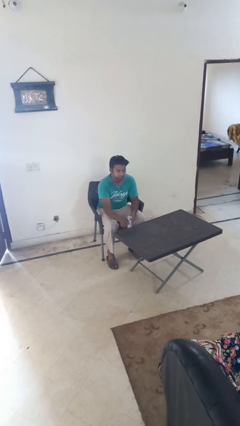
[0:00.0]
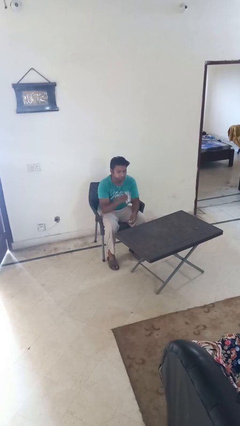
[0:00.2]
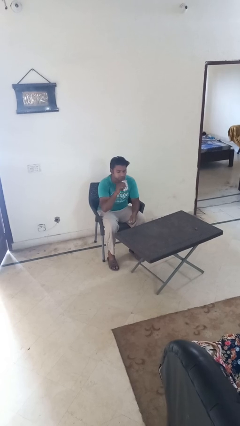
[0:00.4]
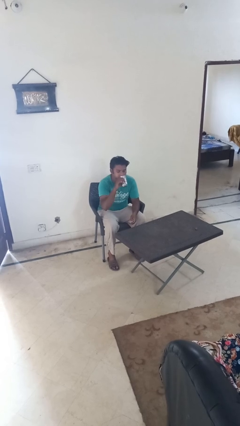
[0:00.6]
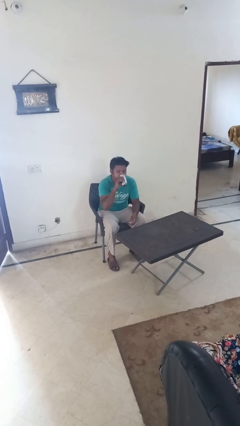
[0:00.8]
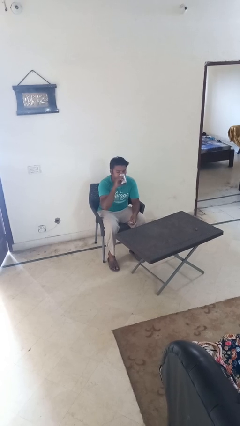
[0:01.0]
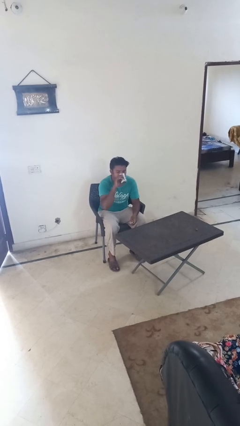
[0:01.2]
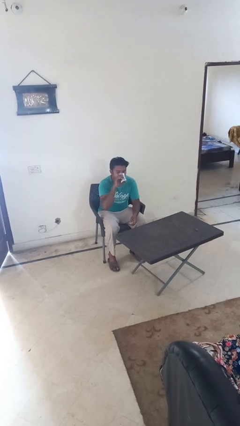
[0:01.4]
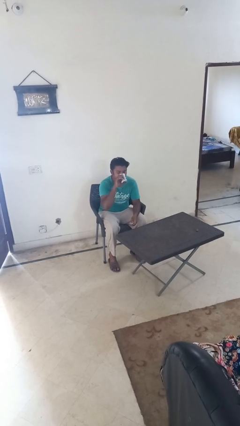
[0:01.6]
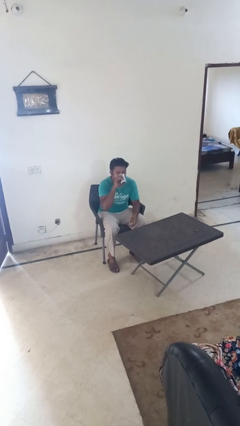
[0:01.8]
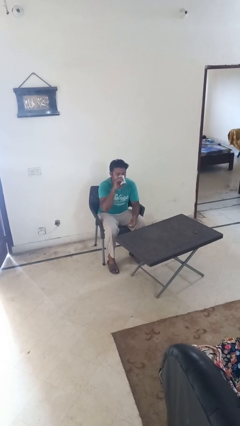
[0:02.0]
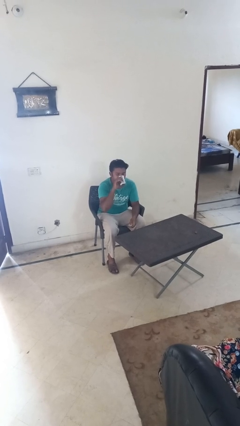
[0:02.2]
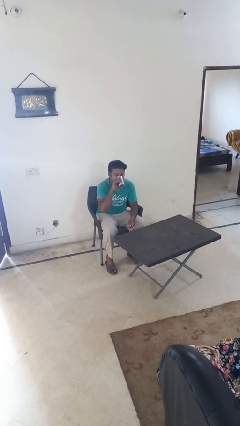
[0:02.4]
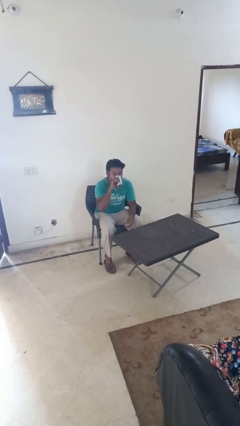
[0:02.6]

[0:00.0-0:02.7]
person drinks from cup

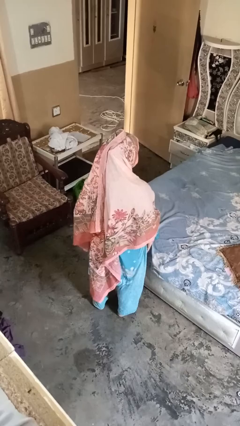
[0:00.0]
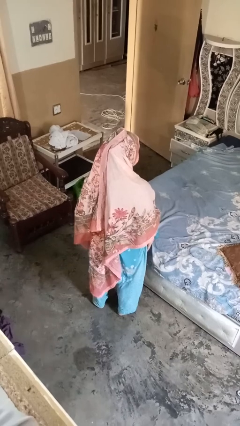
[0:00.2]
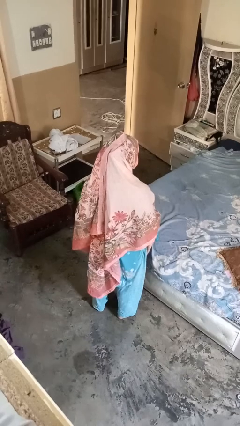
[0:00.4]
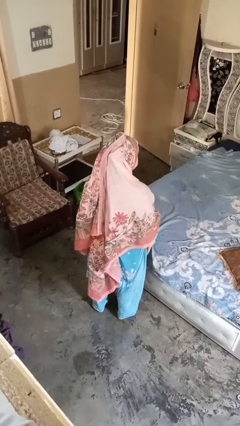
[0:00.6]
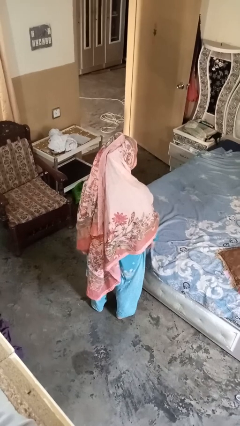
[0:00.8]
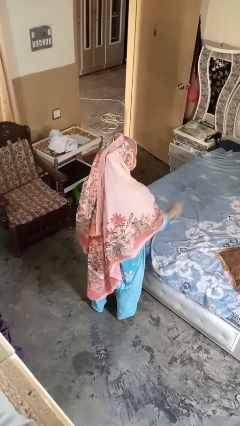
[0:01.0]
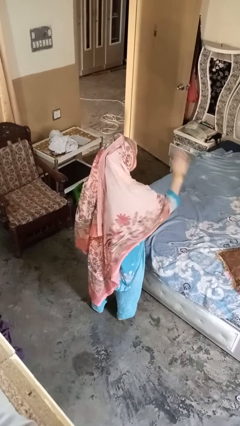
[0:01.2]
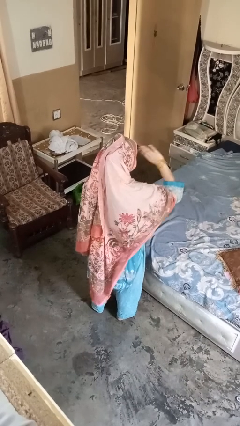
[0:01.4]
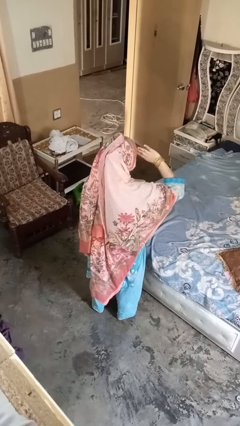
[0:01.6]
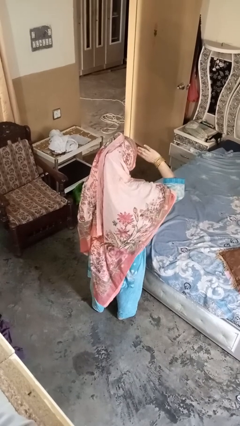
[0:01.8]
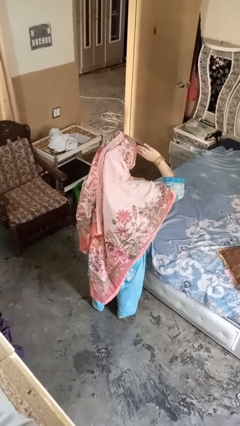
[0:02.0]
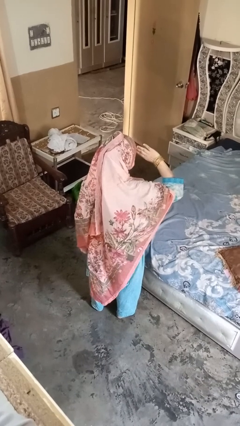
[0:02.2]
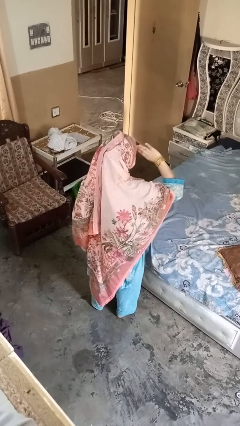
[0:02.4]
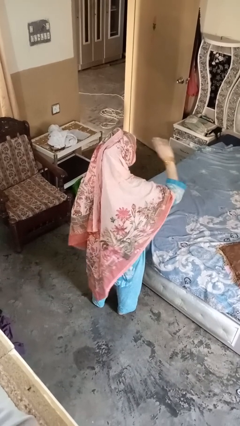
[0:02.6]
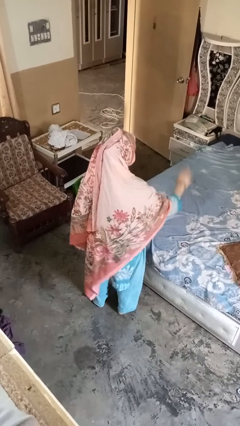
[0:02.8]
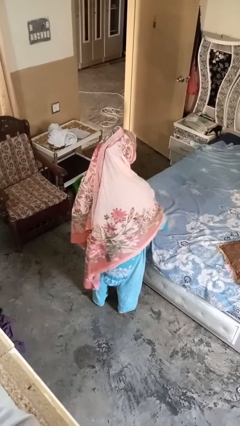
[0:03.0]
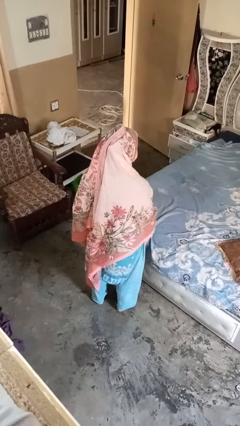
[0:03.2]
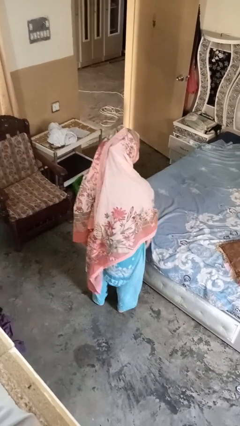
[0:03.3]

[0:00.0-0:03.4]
person salutes

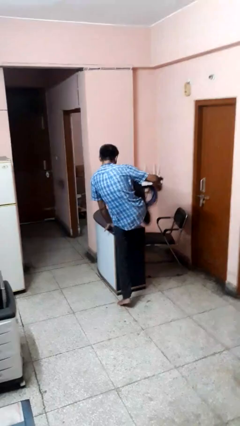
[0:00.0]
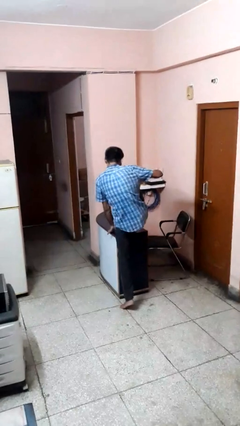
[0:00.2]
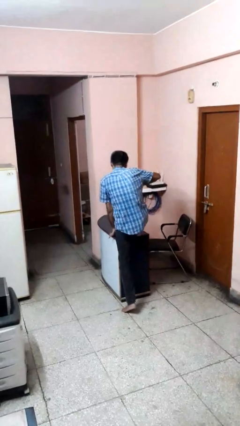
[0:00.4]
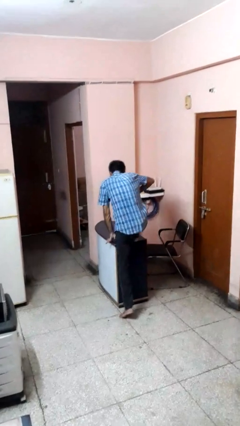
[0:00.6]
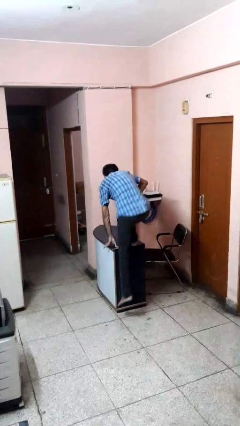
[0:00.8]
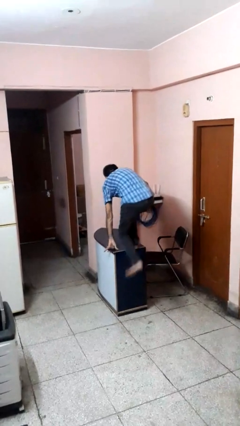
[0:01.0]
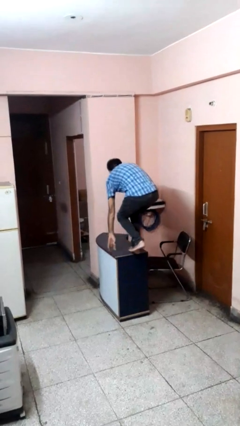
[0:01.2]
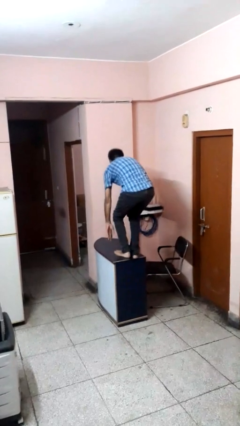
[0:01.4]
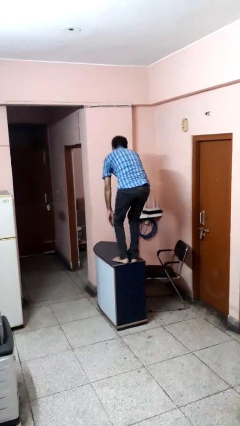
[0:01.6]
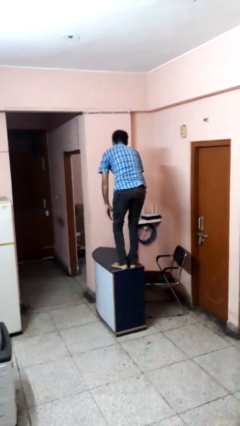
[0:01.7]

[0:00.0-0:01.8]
person climbs on table

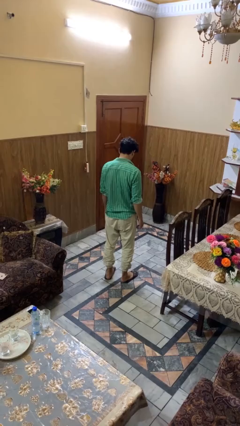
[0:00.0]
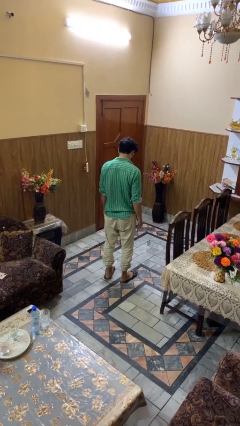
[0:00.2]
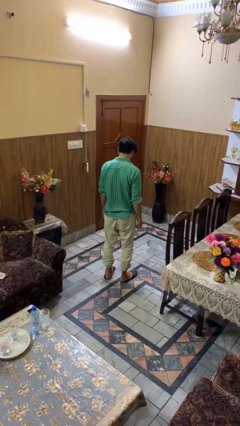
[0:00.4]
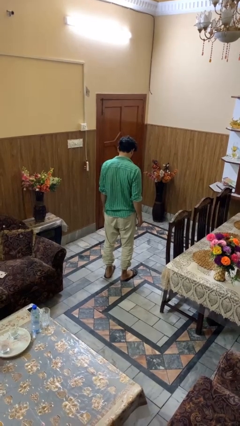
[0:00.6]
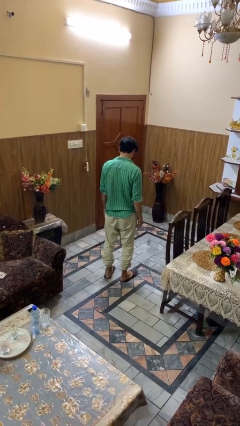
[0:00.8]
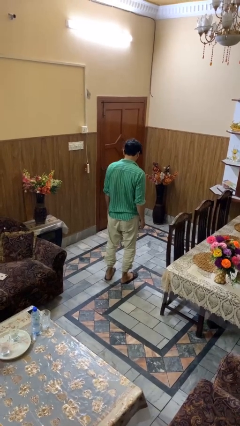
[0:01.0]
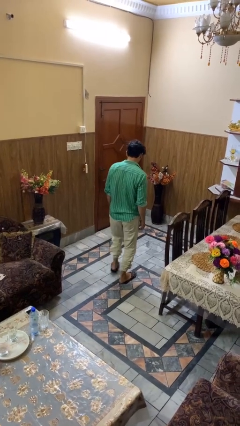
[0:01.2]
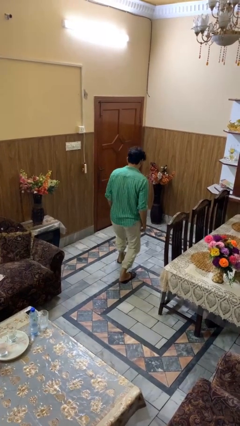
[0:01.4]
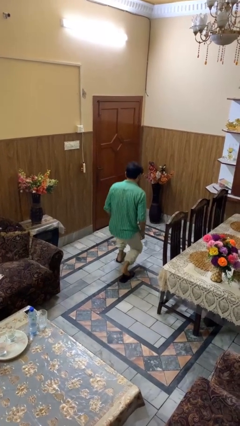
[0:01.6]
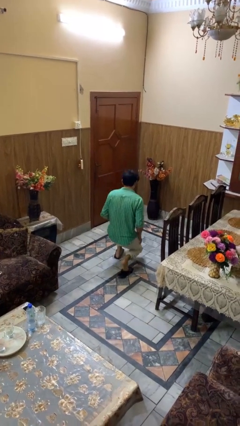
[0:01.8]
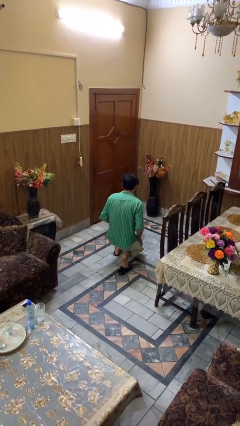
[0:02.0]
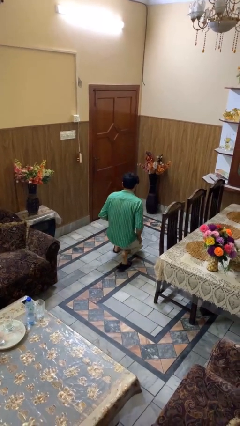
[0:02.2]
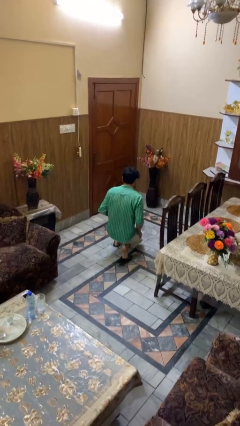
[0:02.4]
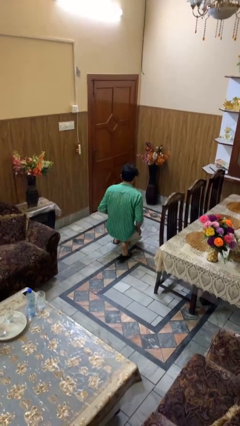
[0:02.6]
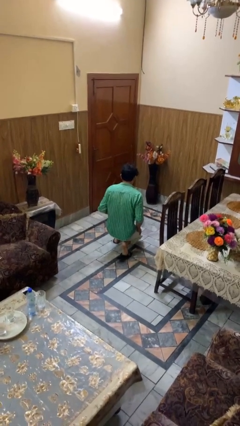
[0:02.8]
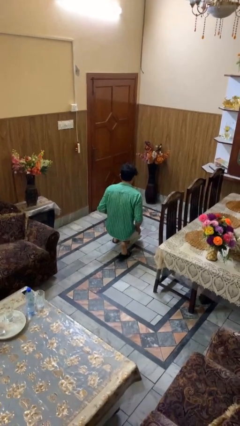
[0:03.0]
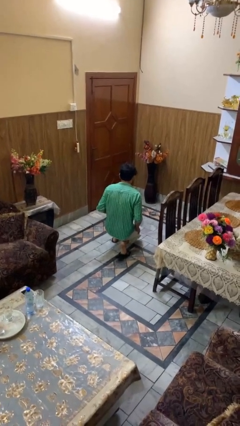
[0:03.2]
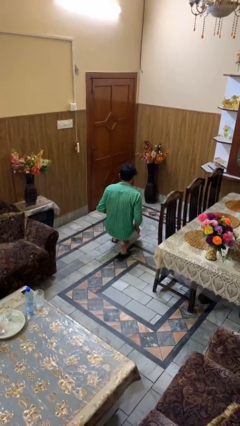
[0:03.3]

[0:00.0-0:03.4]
person kneels

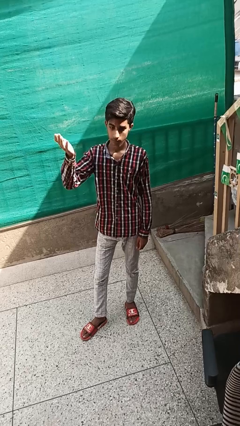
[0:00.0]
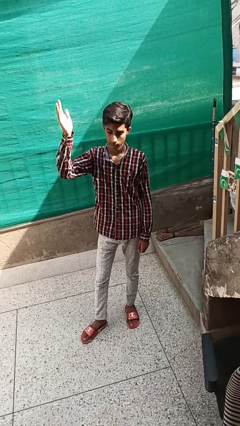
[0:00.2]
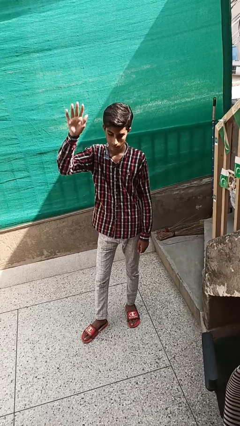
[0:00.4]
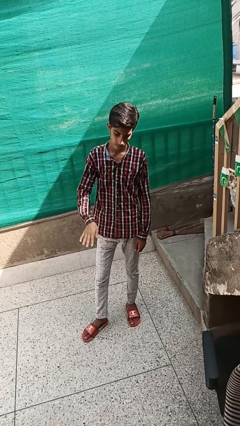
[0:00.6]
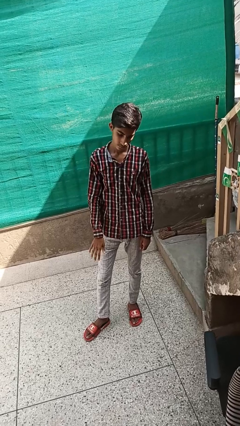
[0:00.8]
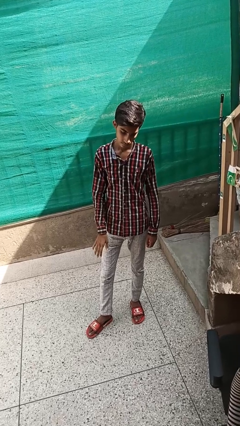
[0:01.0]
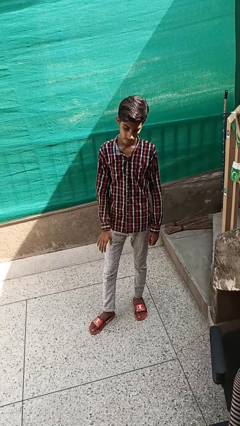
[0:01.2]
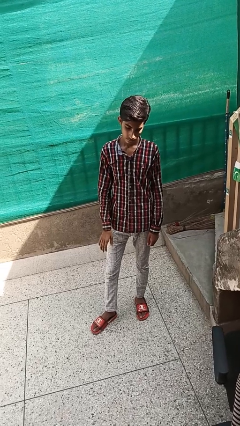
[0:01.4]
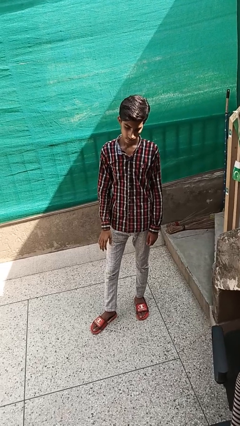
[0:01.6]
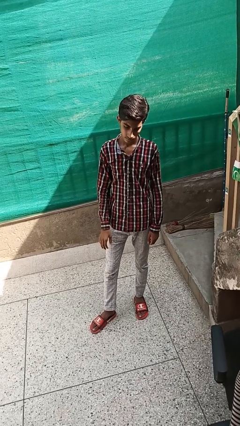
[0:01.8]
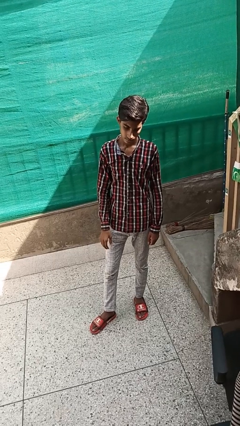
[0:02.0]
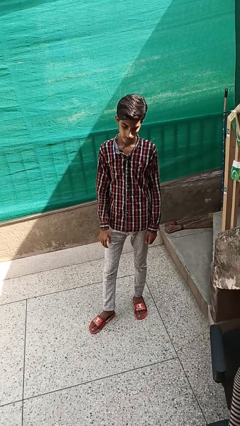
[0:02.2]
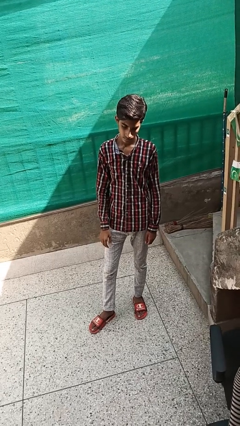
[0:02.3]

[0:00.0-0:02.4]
person gestures swipe down

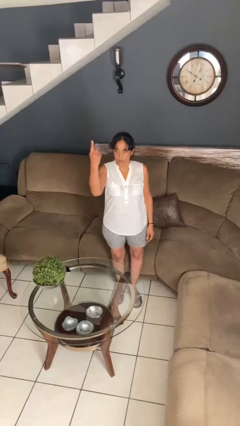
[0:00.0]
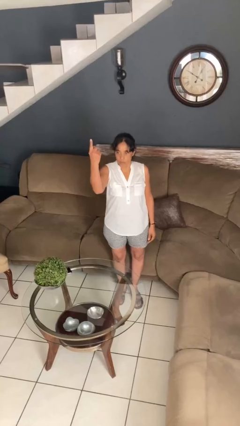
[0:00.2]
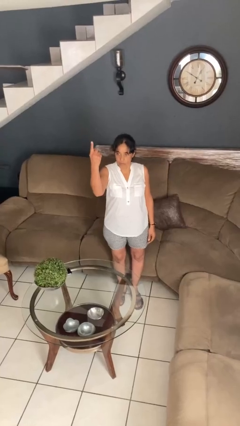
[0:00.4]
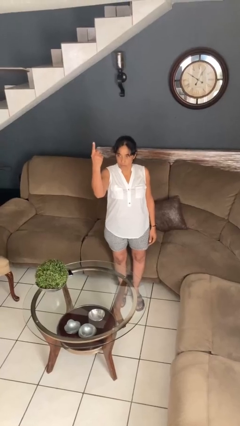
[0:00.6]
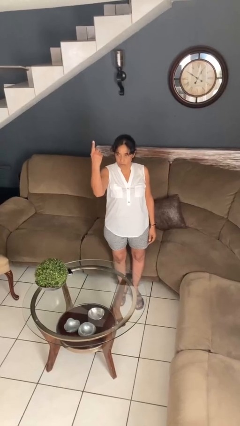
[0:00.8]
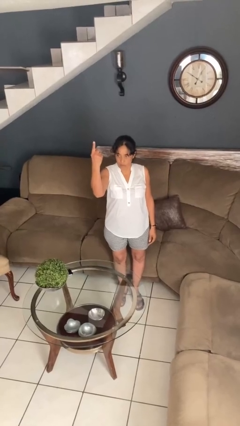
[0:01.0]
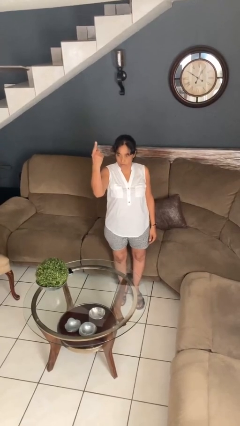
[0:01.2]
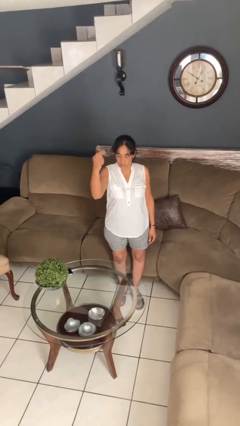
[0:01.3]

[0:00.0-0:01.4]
person gestures number one

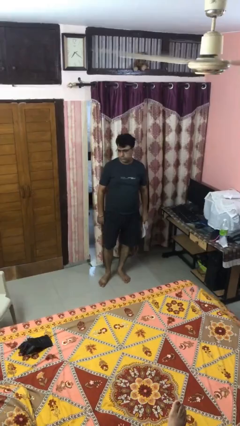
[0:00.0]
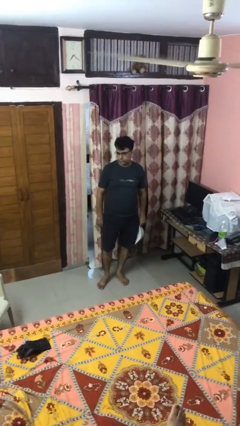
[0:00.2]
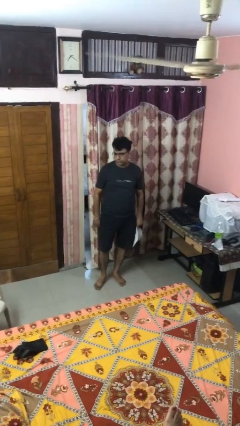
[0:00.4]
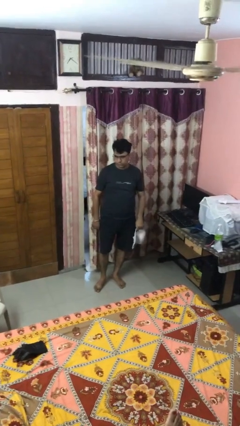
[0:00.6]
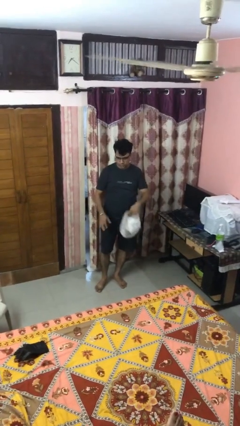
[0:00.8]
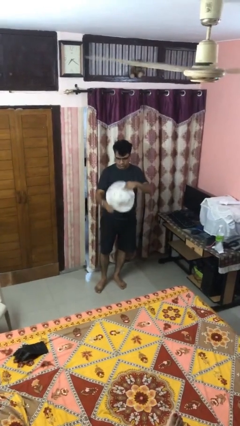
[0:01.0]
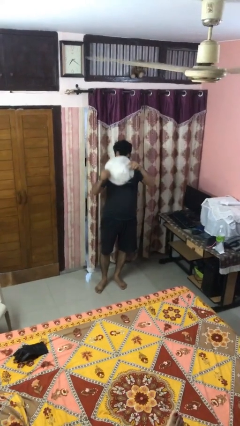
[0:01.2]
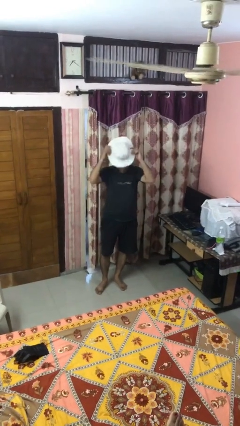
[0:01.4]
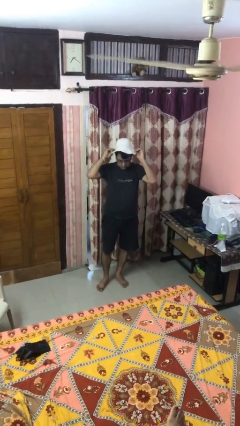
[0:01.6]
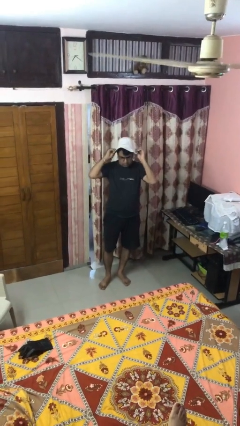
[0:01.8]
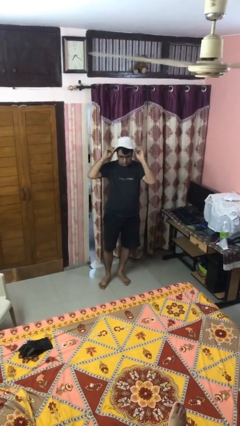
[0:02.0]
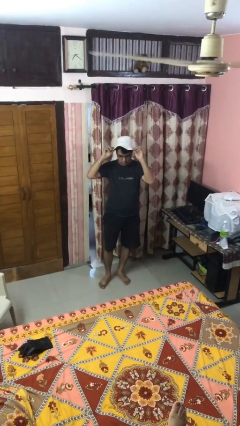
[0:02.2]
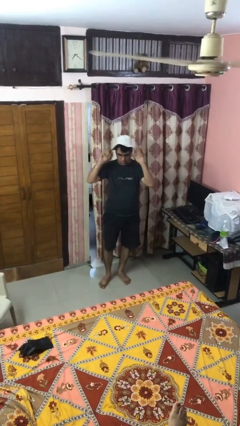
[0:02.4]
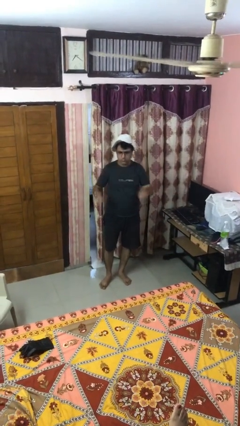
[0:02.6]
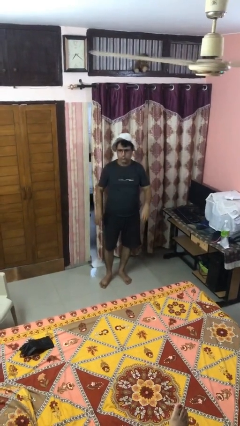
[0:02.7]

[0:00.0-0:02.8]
person puts on hat
